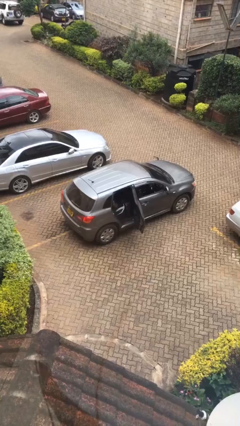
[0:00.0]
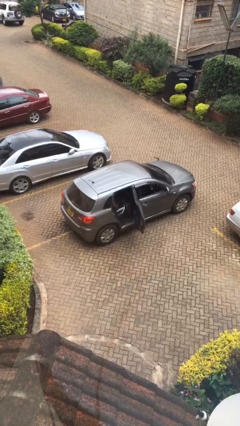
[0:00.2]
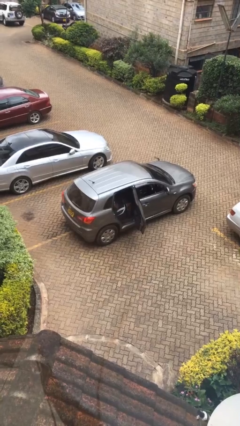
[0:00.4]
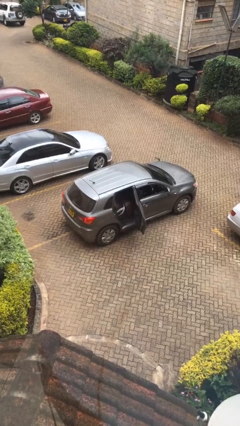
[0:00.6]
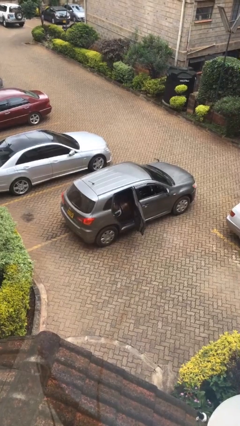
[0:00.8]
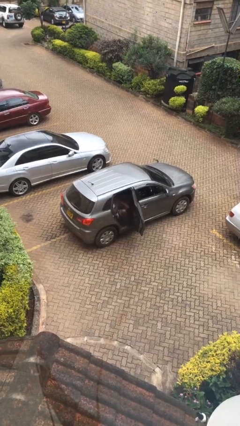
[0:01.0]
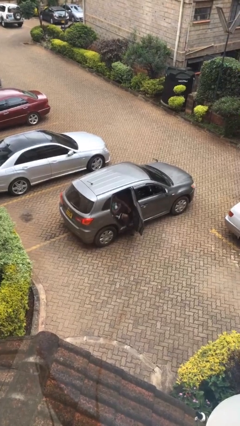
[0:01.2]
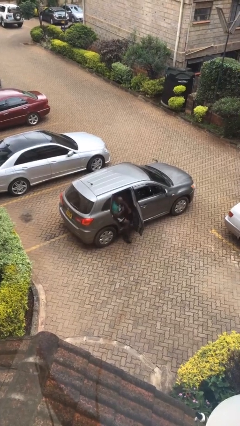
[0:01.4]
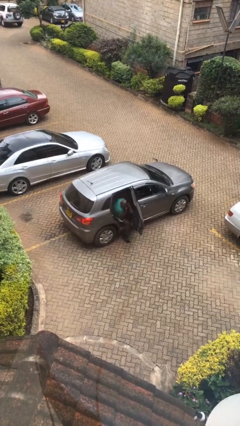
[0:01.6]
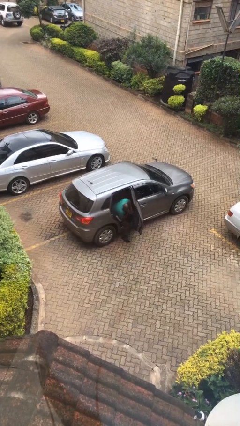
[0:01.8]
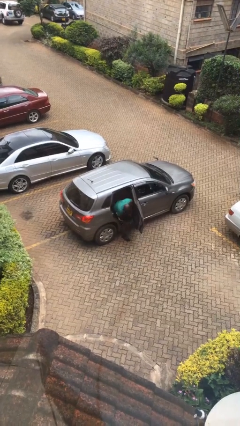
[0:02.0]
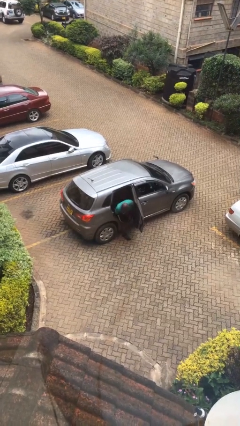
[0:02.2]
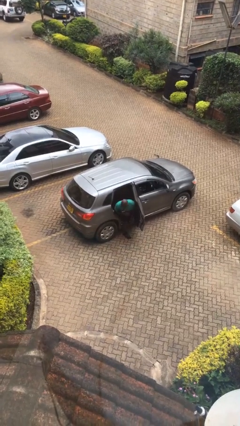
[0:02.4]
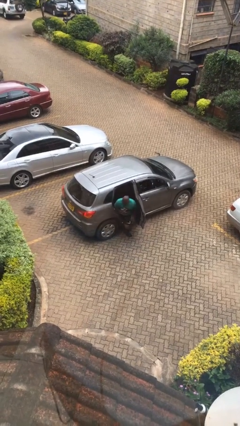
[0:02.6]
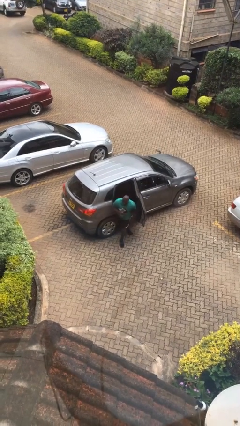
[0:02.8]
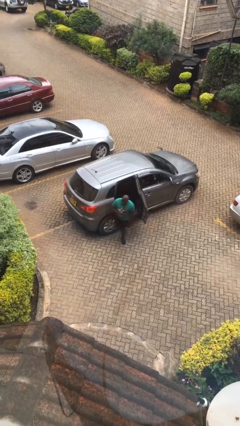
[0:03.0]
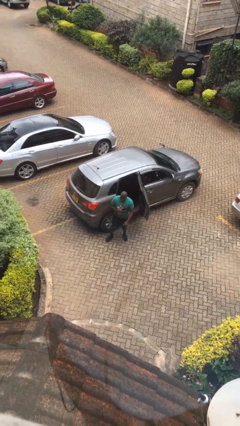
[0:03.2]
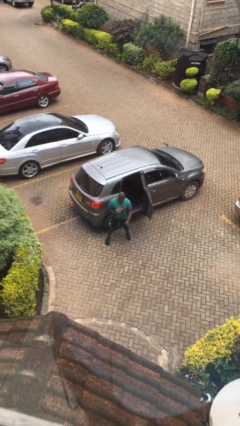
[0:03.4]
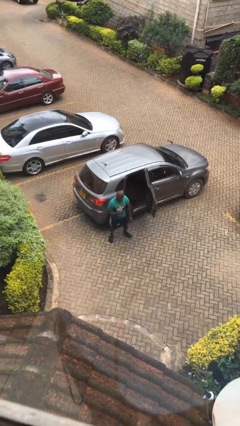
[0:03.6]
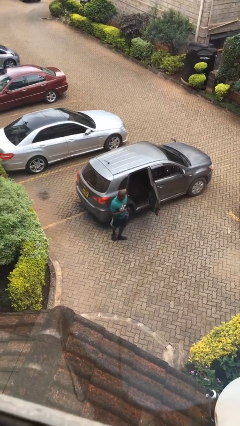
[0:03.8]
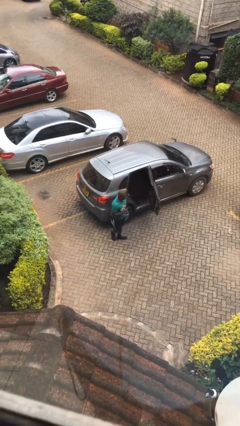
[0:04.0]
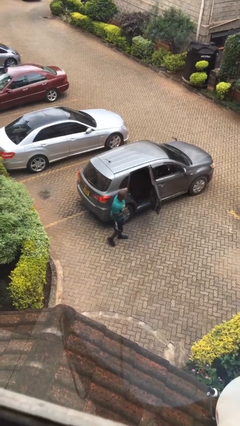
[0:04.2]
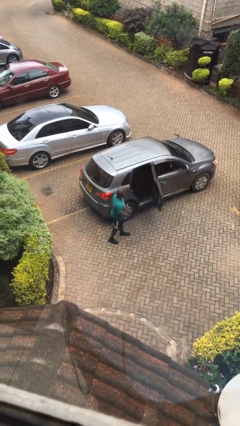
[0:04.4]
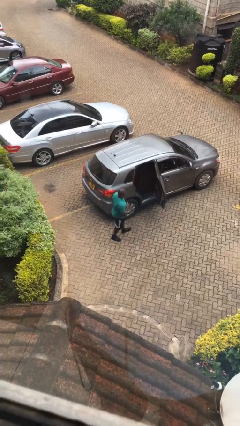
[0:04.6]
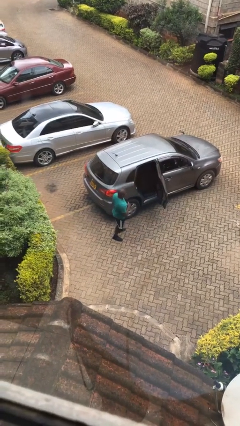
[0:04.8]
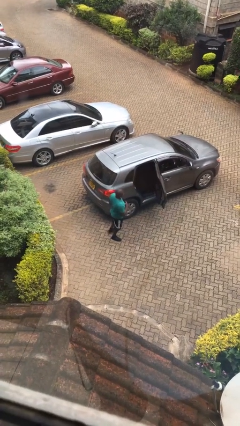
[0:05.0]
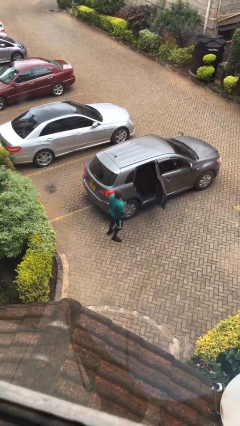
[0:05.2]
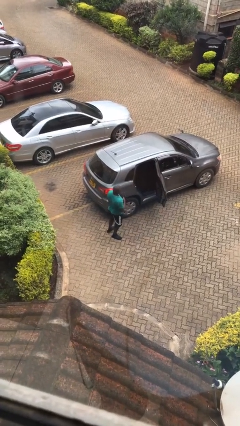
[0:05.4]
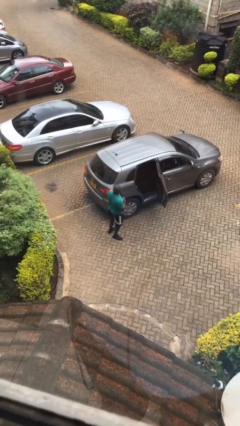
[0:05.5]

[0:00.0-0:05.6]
person exits car

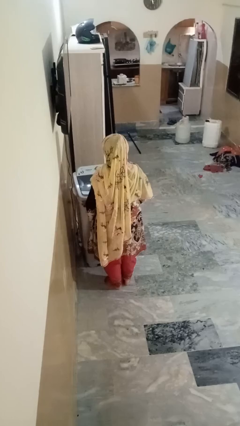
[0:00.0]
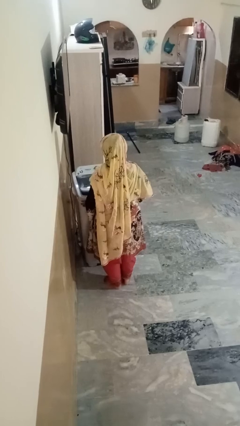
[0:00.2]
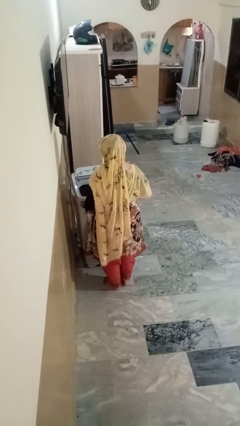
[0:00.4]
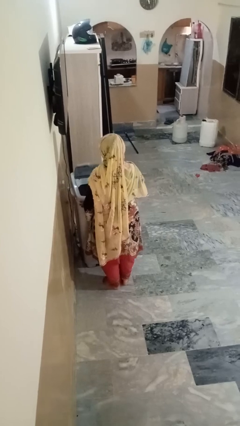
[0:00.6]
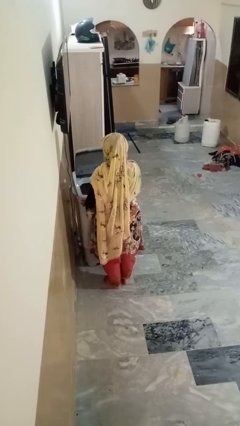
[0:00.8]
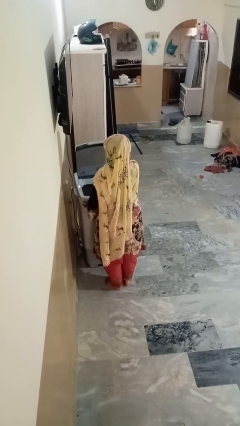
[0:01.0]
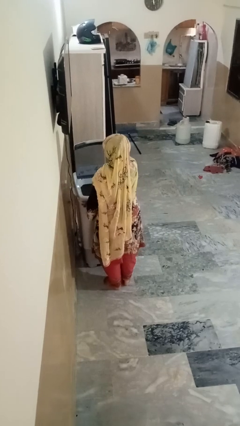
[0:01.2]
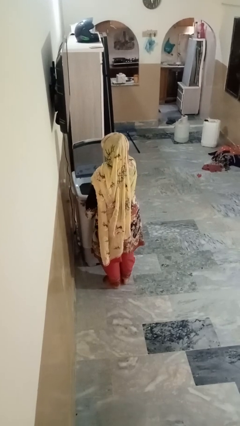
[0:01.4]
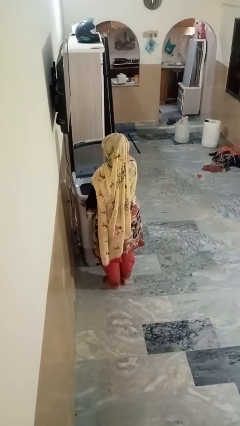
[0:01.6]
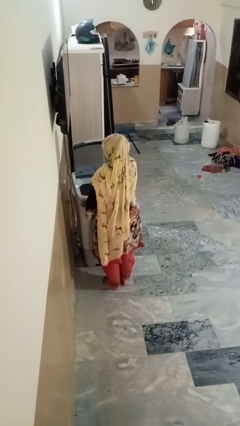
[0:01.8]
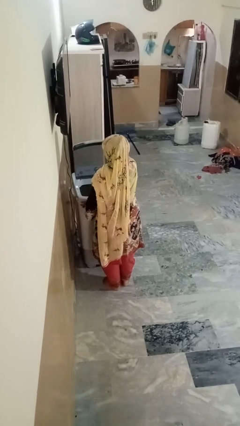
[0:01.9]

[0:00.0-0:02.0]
person opens clothes washer

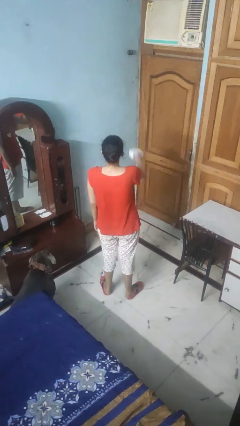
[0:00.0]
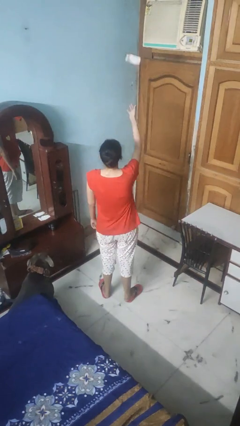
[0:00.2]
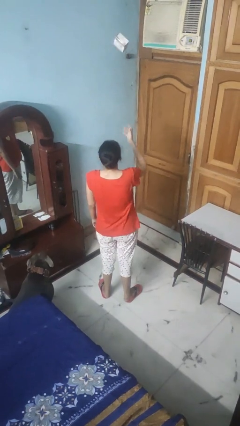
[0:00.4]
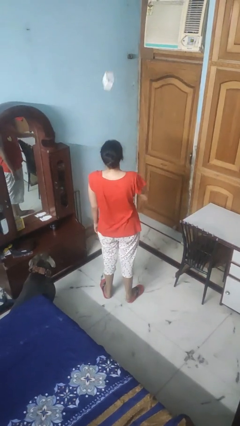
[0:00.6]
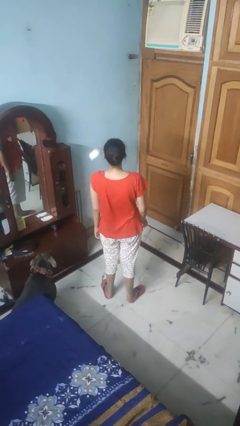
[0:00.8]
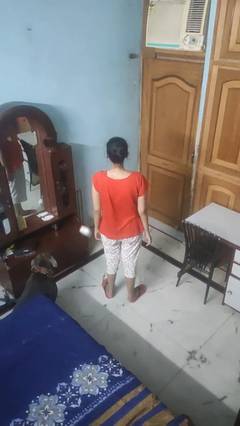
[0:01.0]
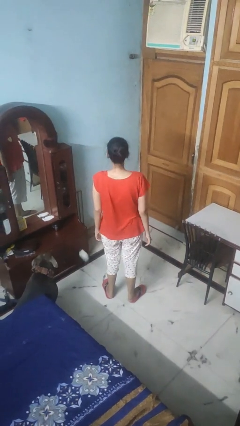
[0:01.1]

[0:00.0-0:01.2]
person throws object into air

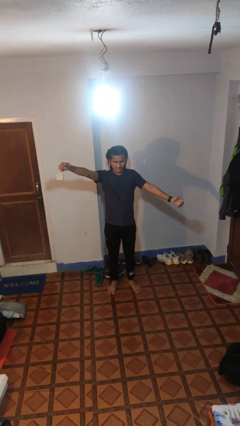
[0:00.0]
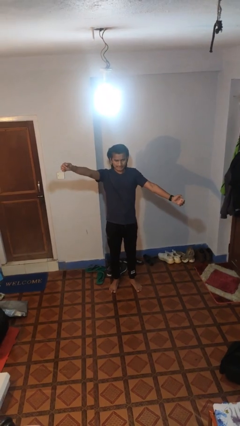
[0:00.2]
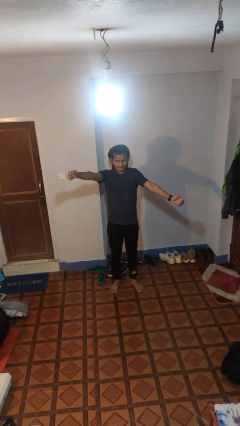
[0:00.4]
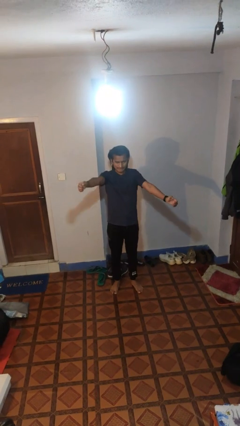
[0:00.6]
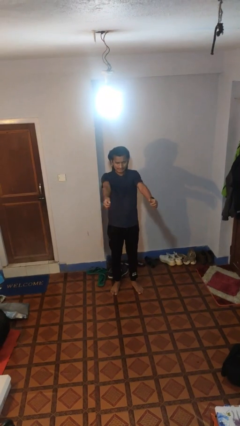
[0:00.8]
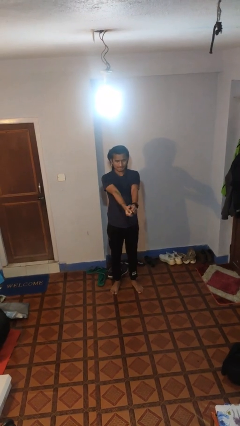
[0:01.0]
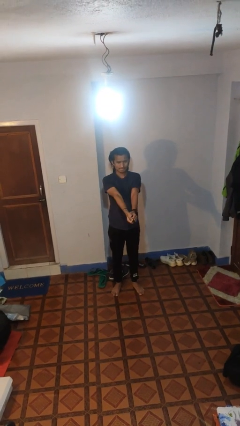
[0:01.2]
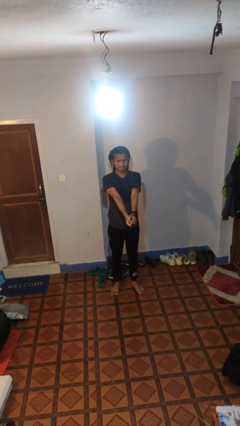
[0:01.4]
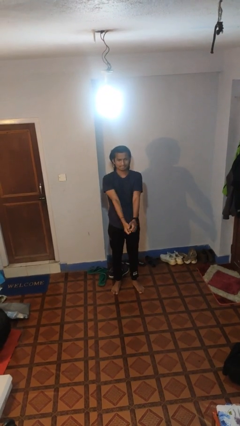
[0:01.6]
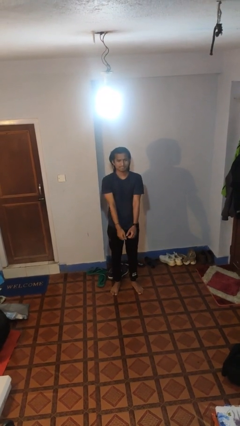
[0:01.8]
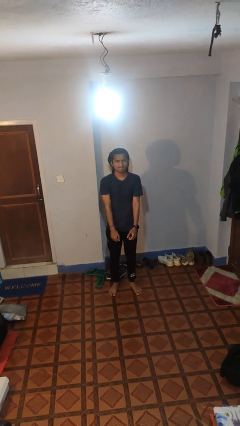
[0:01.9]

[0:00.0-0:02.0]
person gestures zoom out

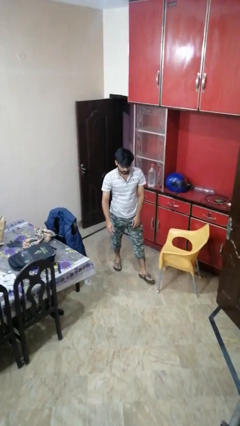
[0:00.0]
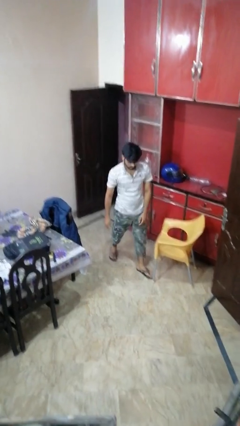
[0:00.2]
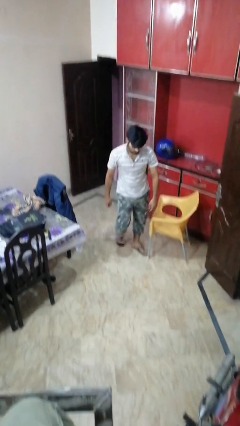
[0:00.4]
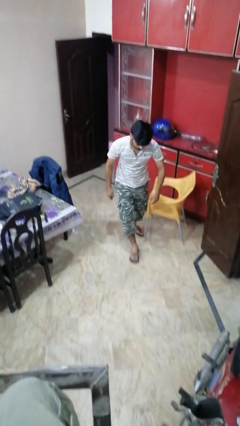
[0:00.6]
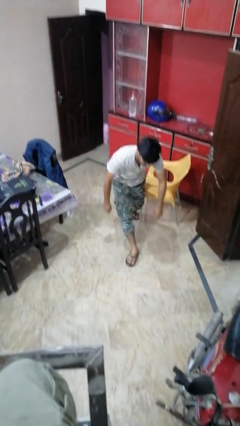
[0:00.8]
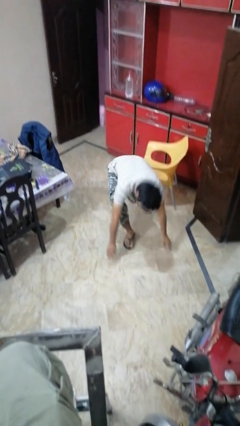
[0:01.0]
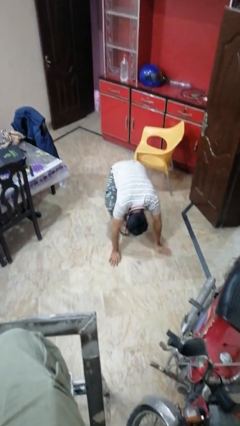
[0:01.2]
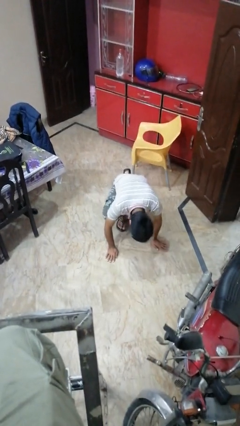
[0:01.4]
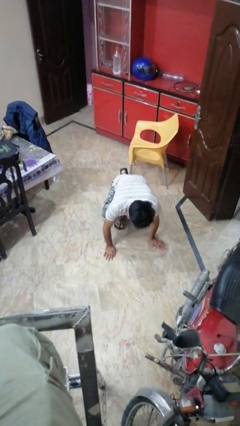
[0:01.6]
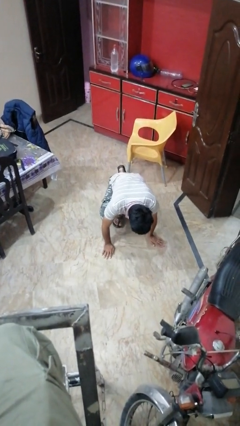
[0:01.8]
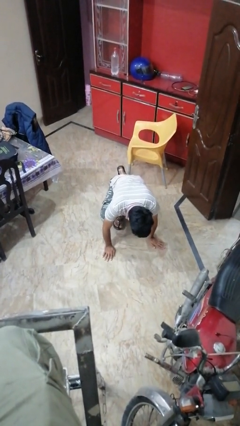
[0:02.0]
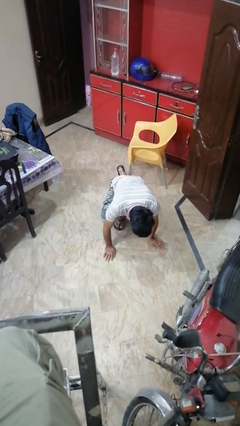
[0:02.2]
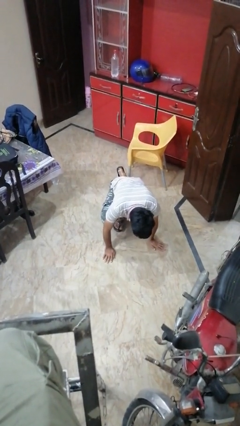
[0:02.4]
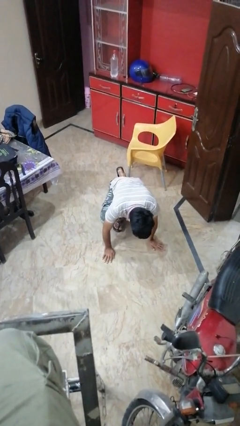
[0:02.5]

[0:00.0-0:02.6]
person trips on object on floor

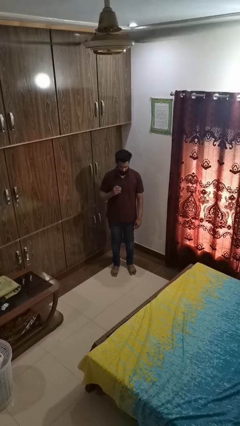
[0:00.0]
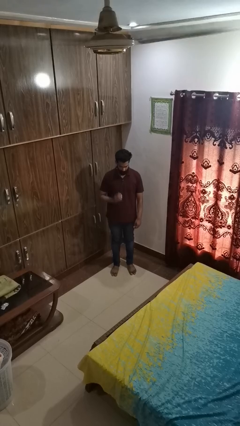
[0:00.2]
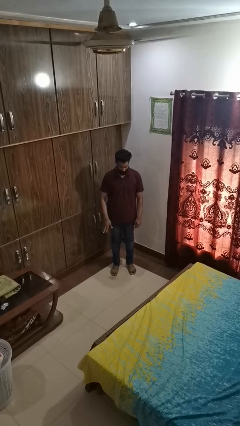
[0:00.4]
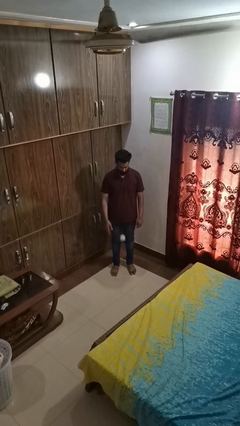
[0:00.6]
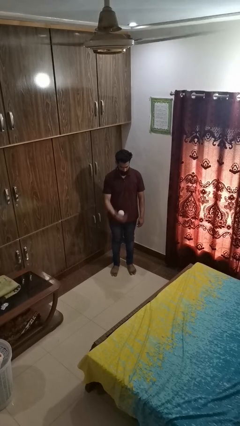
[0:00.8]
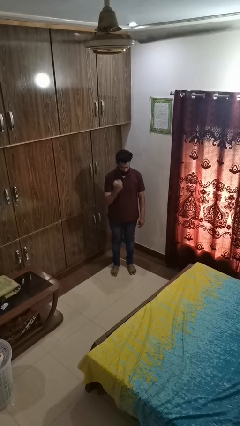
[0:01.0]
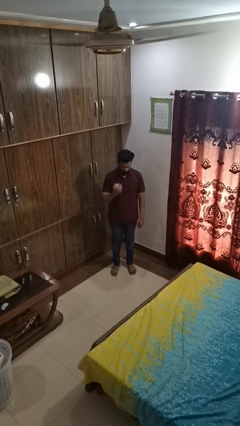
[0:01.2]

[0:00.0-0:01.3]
person bounces ball on floor

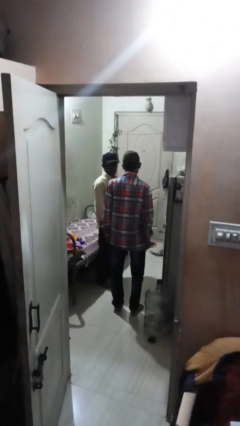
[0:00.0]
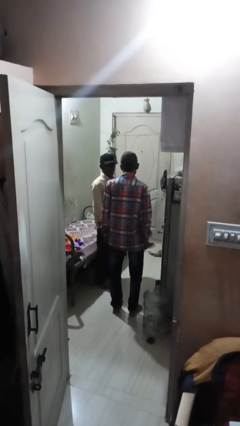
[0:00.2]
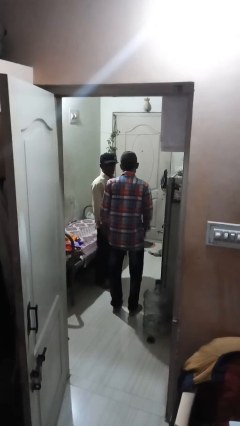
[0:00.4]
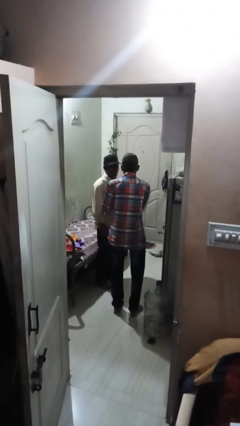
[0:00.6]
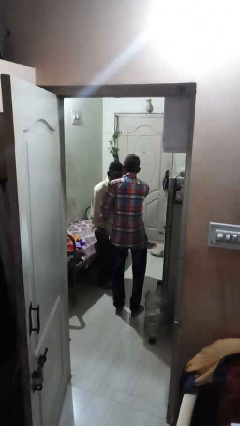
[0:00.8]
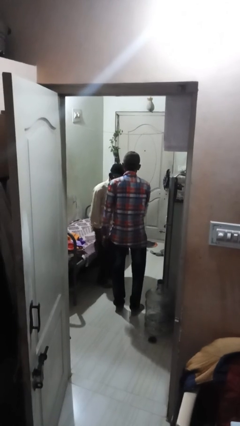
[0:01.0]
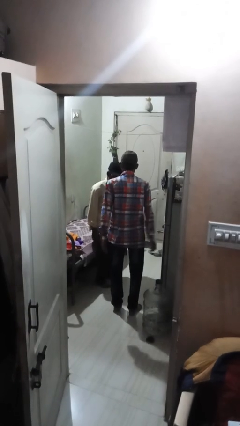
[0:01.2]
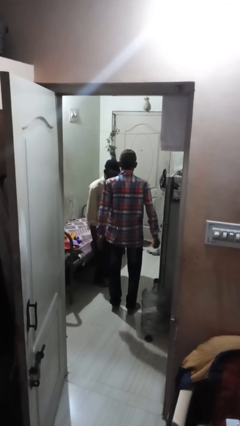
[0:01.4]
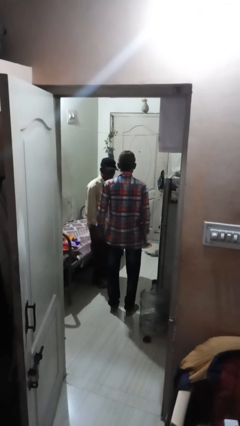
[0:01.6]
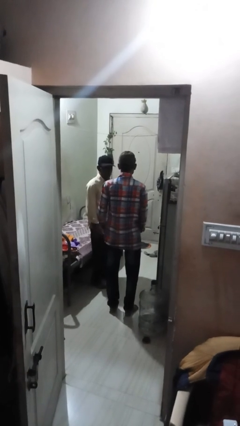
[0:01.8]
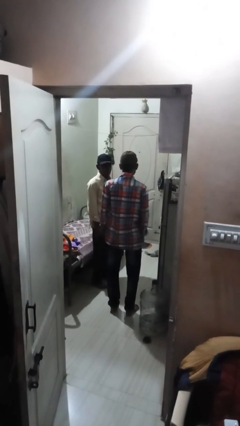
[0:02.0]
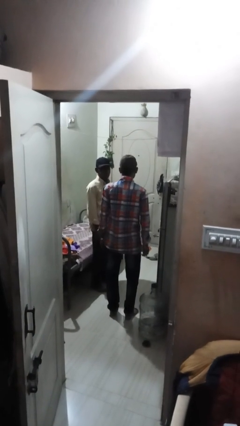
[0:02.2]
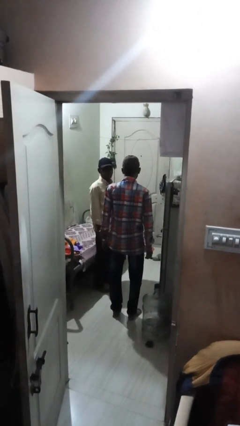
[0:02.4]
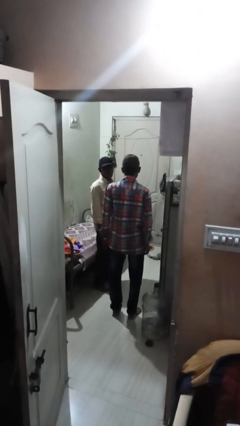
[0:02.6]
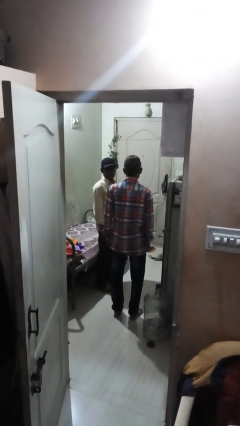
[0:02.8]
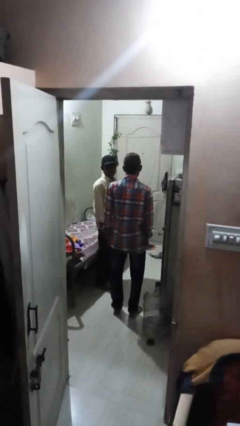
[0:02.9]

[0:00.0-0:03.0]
person tickles person
